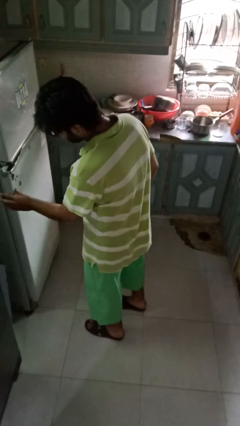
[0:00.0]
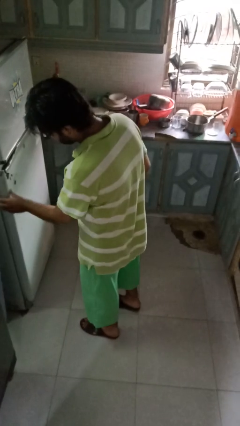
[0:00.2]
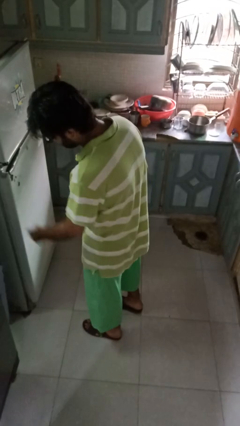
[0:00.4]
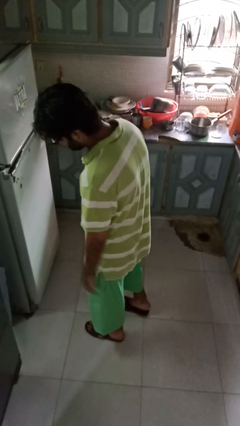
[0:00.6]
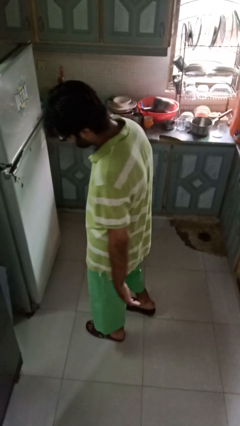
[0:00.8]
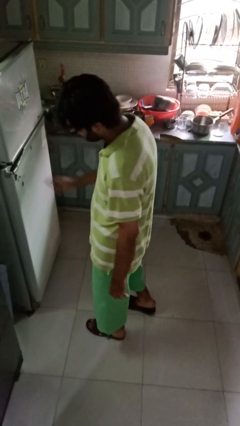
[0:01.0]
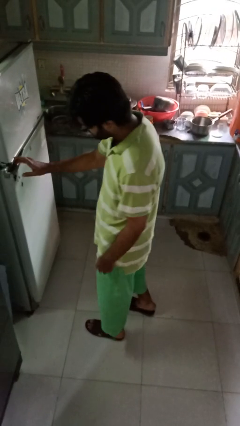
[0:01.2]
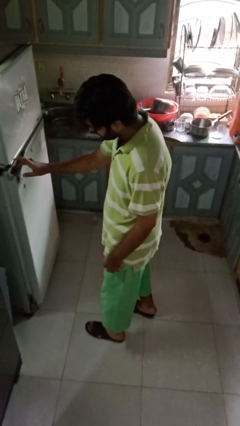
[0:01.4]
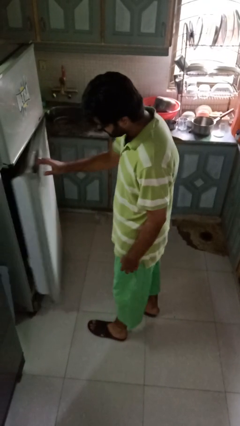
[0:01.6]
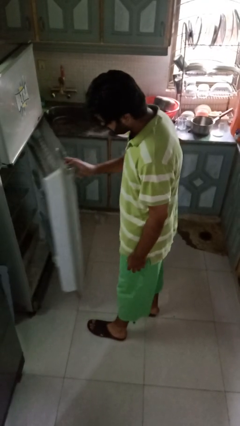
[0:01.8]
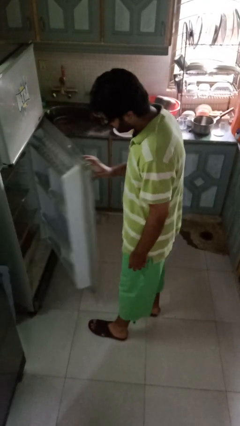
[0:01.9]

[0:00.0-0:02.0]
person opens refrigerator

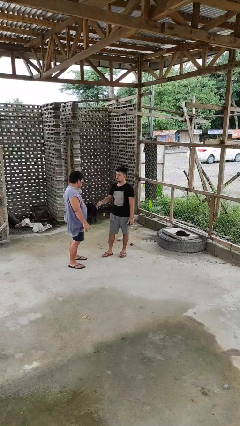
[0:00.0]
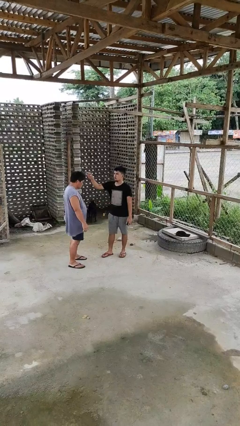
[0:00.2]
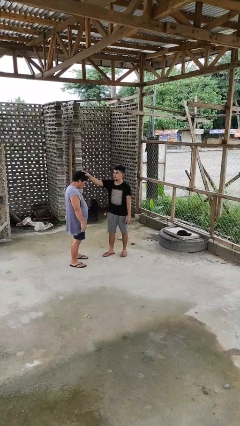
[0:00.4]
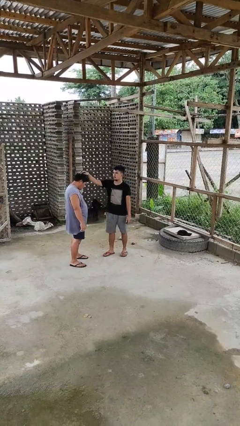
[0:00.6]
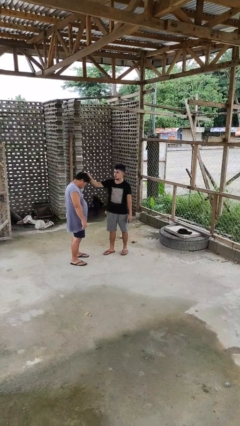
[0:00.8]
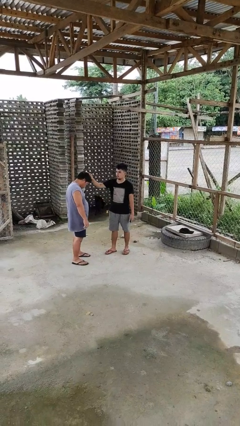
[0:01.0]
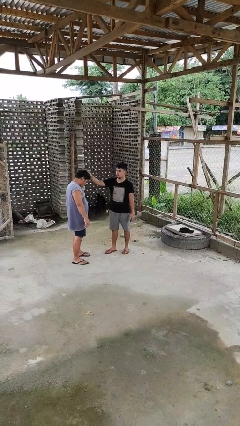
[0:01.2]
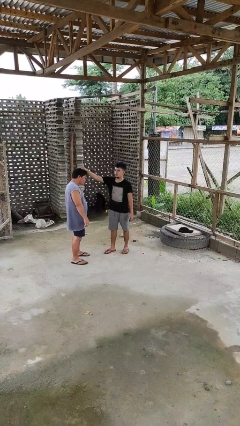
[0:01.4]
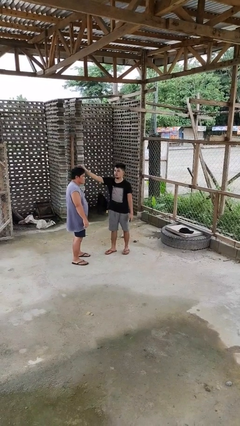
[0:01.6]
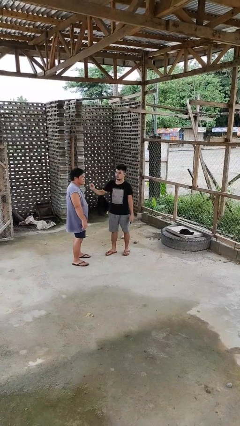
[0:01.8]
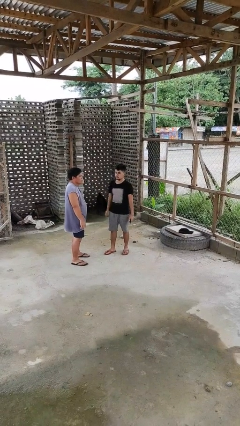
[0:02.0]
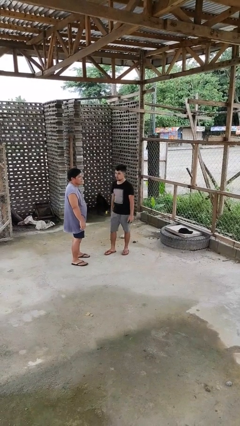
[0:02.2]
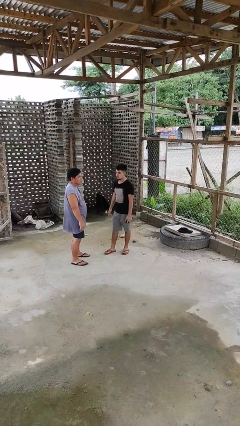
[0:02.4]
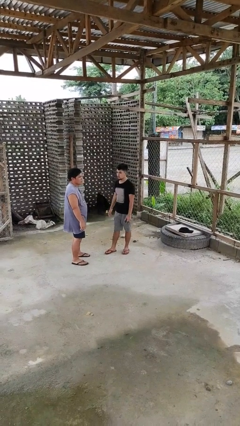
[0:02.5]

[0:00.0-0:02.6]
person grabs person by hair

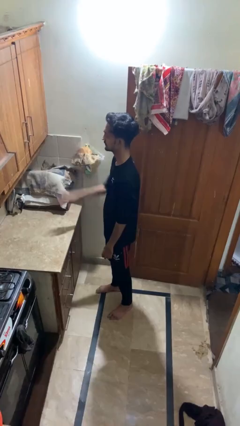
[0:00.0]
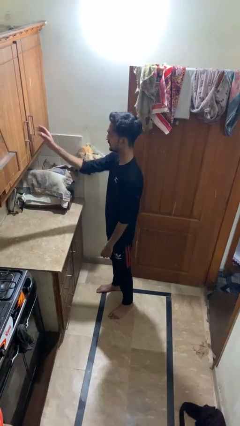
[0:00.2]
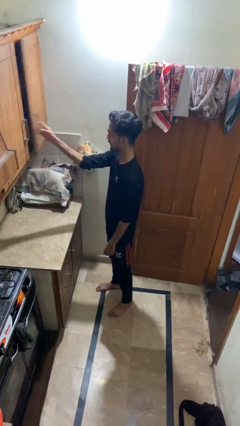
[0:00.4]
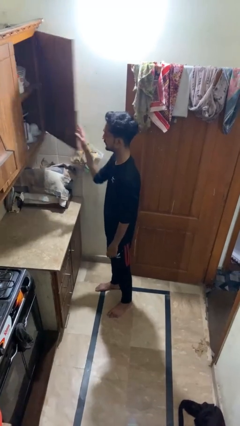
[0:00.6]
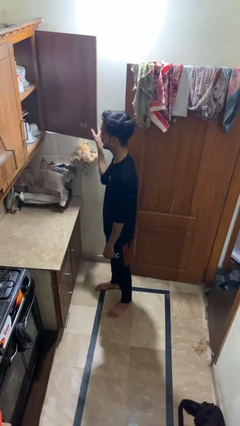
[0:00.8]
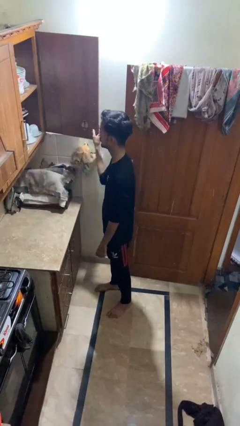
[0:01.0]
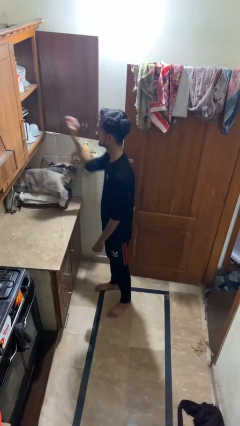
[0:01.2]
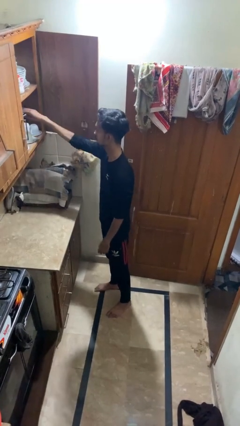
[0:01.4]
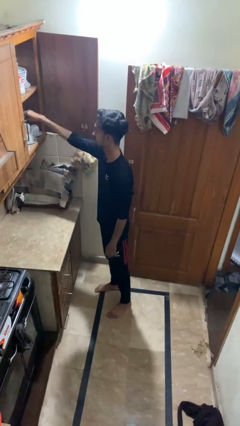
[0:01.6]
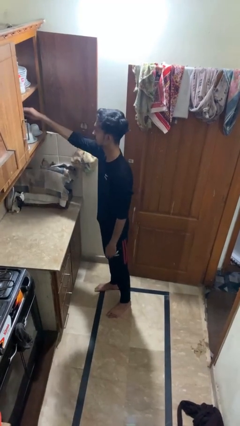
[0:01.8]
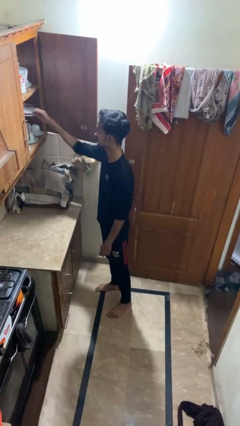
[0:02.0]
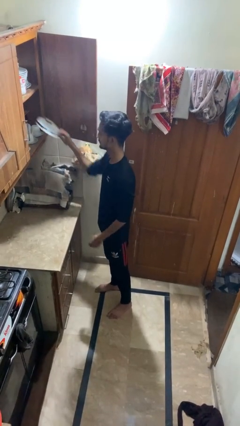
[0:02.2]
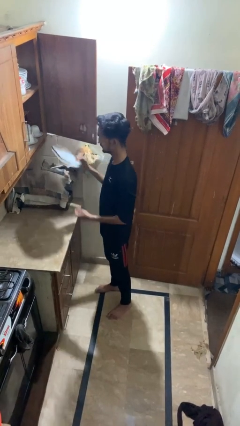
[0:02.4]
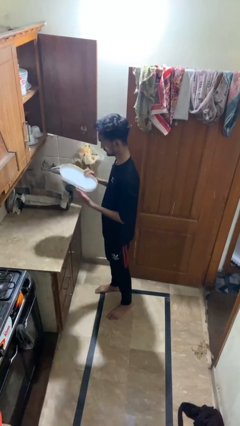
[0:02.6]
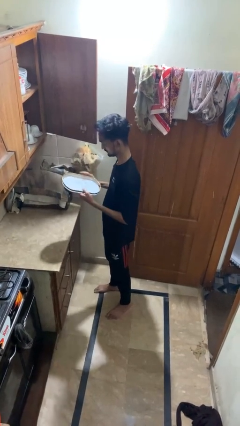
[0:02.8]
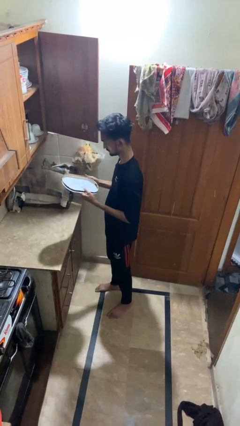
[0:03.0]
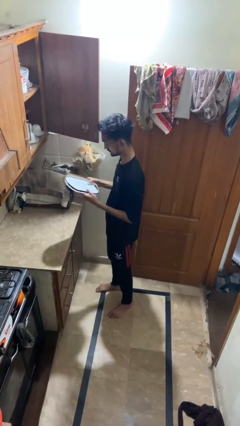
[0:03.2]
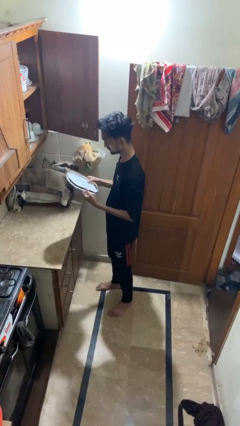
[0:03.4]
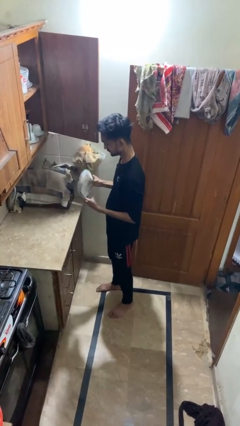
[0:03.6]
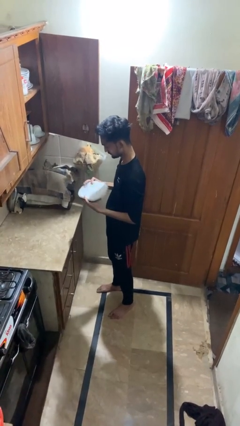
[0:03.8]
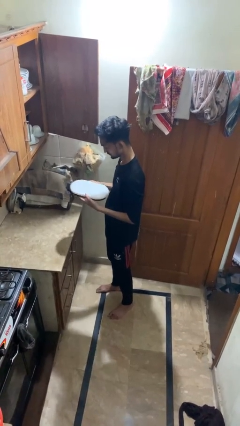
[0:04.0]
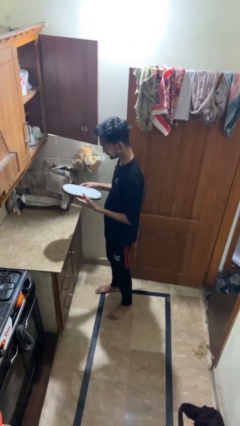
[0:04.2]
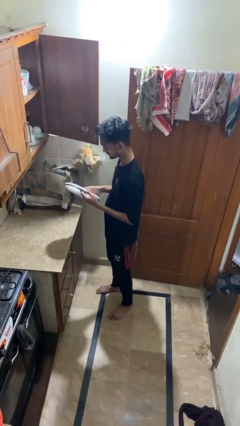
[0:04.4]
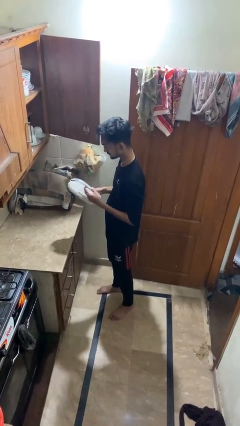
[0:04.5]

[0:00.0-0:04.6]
person puts object in cabinet

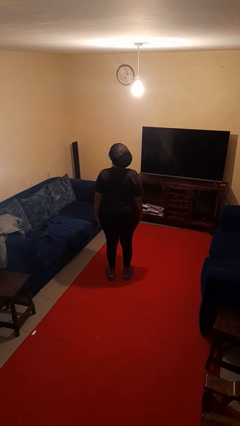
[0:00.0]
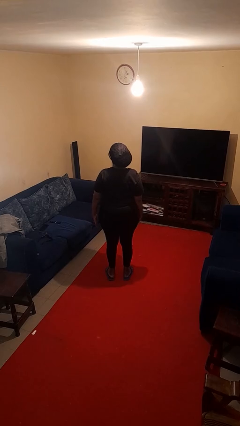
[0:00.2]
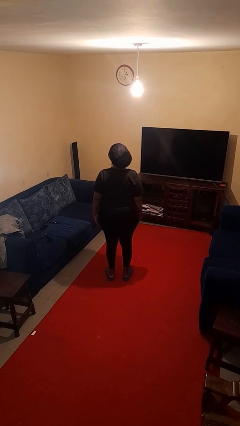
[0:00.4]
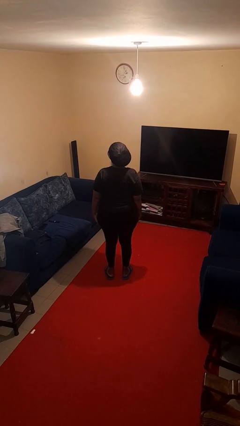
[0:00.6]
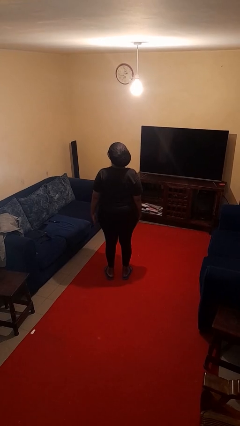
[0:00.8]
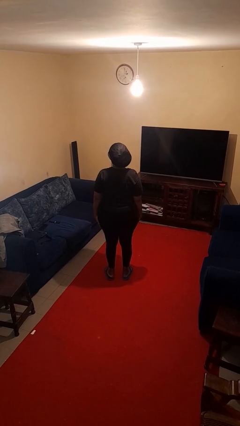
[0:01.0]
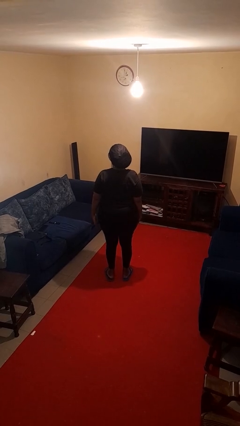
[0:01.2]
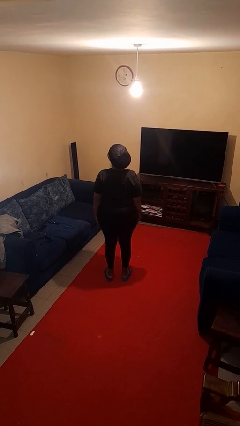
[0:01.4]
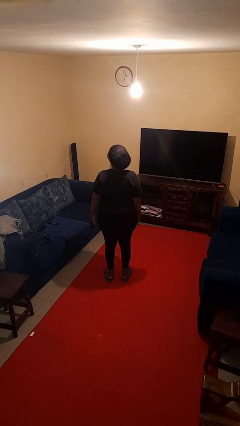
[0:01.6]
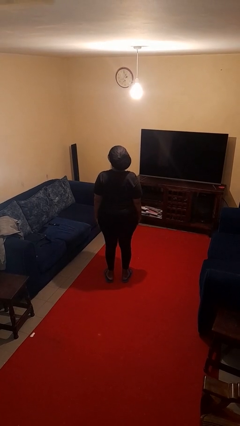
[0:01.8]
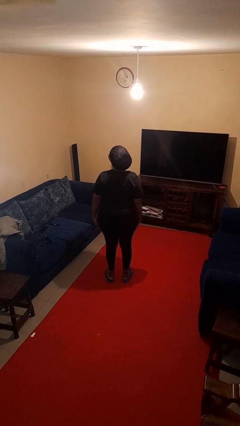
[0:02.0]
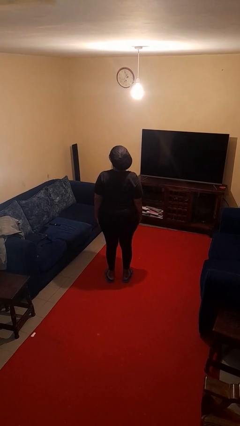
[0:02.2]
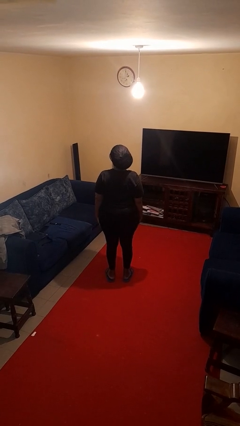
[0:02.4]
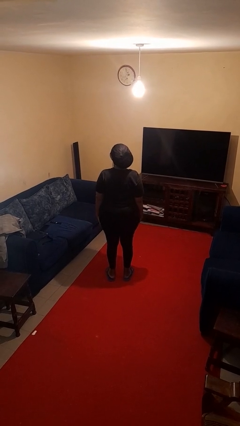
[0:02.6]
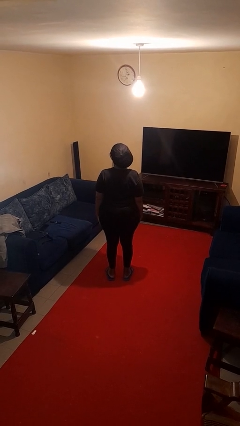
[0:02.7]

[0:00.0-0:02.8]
person slaps hands on thighs

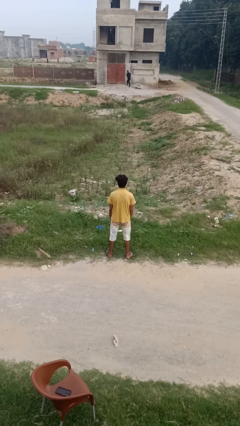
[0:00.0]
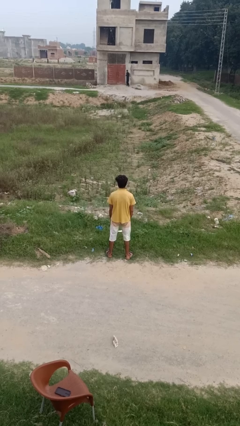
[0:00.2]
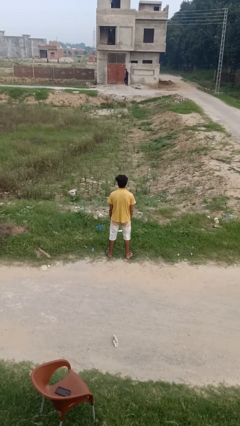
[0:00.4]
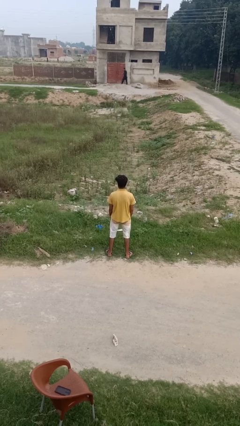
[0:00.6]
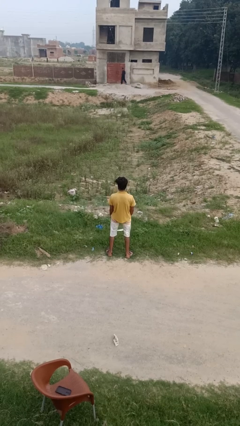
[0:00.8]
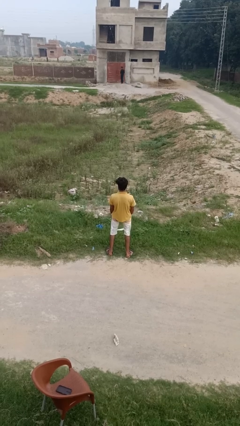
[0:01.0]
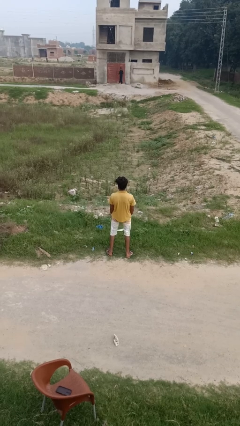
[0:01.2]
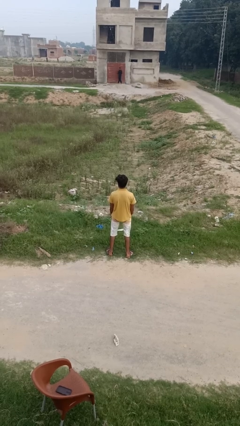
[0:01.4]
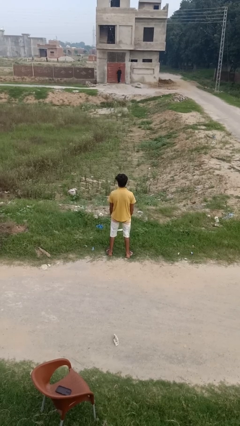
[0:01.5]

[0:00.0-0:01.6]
person wiggles hips

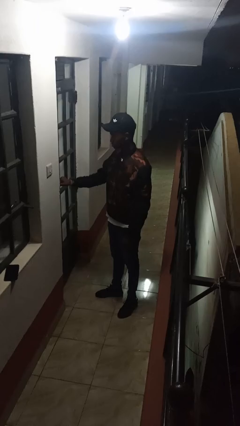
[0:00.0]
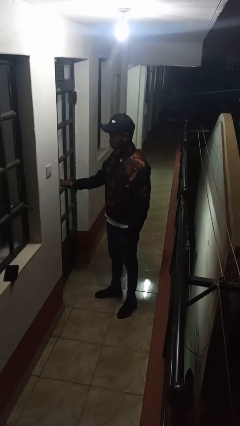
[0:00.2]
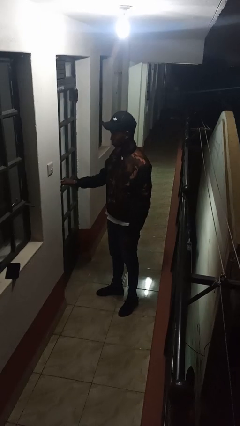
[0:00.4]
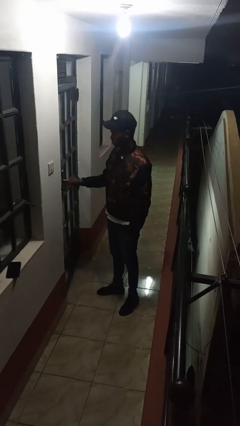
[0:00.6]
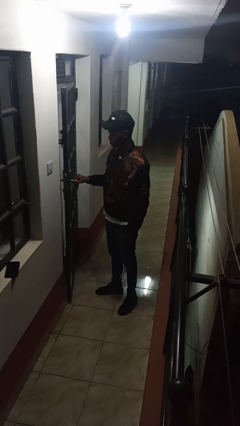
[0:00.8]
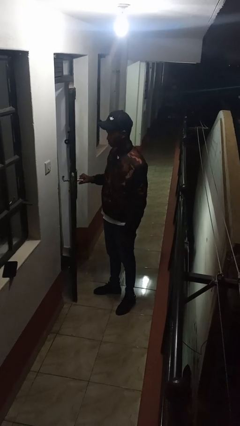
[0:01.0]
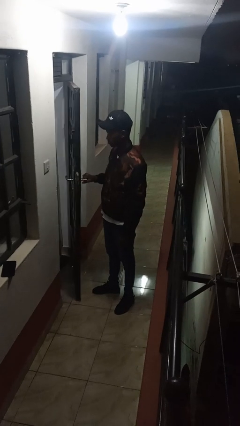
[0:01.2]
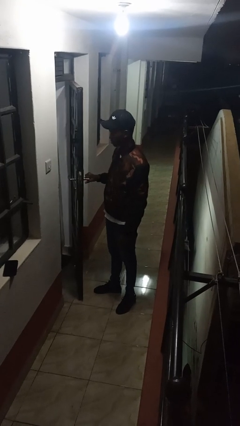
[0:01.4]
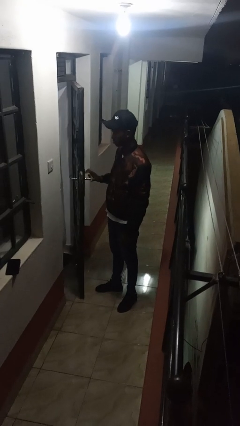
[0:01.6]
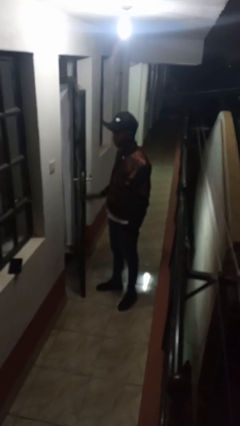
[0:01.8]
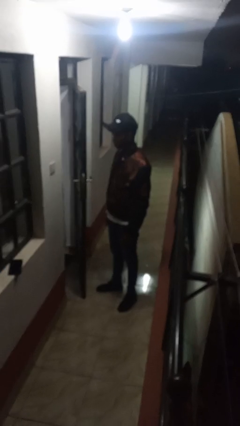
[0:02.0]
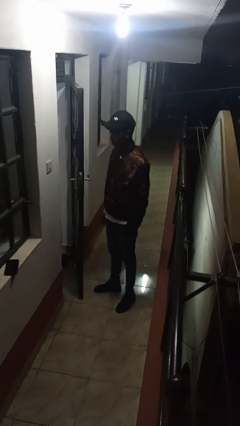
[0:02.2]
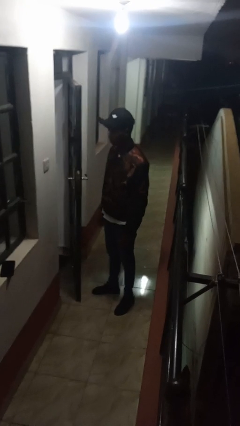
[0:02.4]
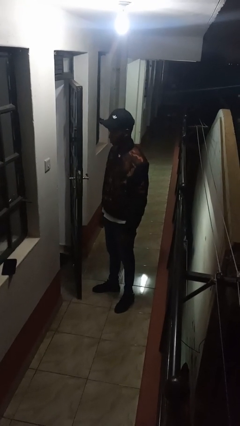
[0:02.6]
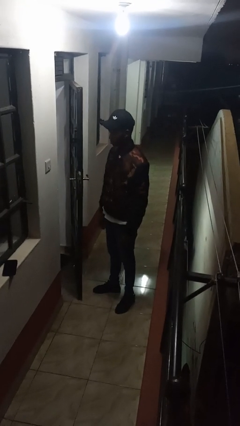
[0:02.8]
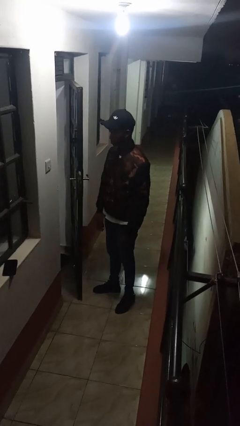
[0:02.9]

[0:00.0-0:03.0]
person opens facility door

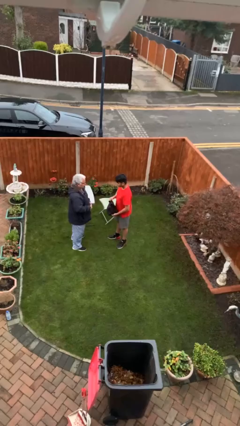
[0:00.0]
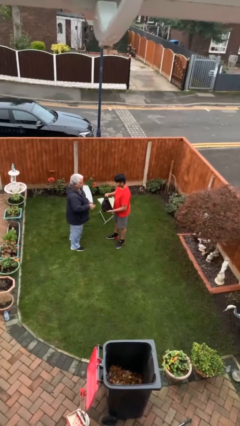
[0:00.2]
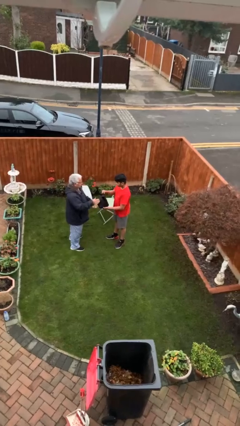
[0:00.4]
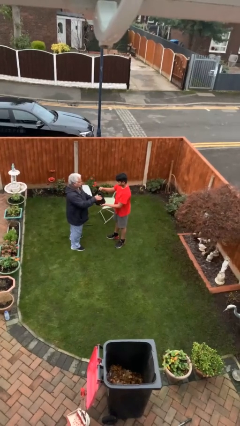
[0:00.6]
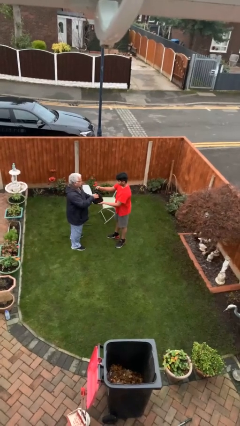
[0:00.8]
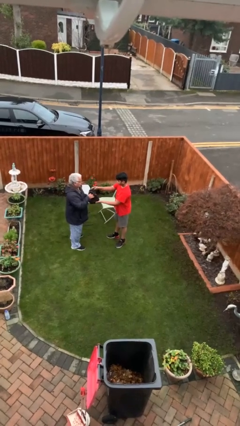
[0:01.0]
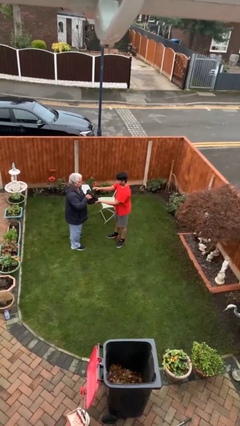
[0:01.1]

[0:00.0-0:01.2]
person transfers object to person
